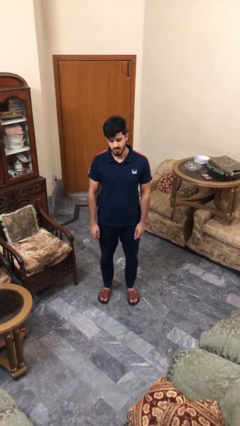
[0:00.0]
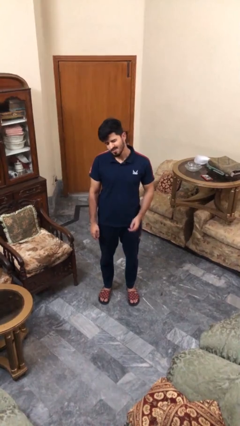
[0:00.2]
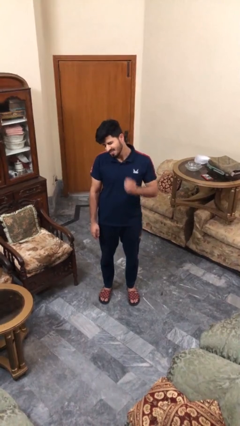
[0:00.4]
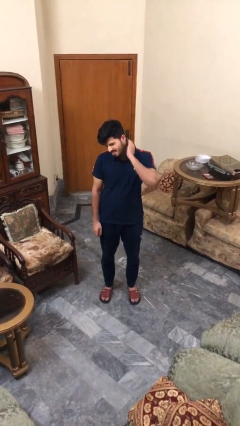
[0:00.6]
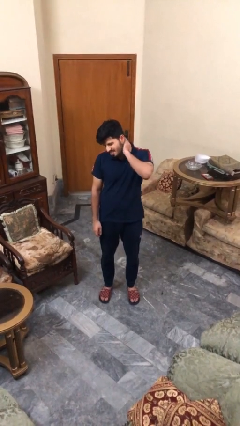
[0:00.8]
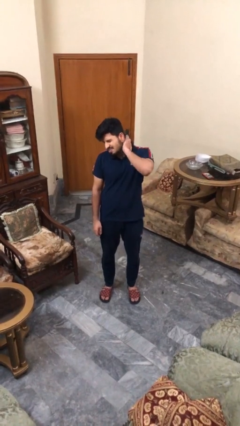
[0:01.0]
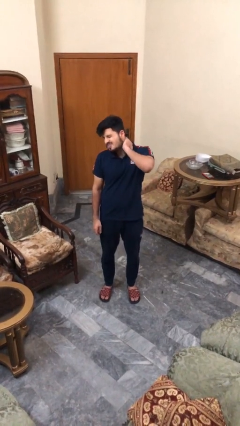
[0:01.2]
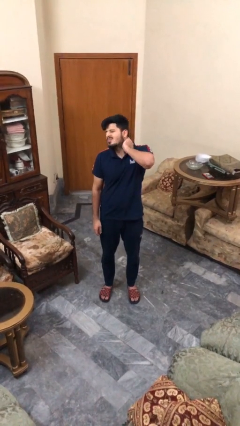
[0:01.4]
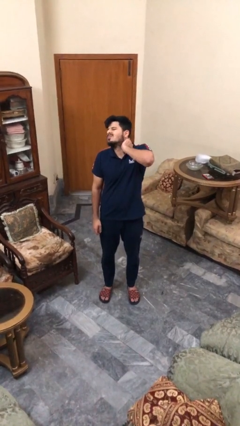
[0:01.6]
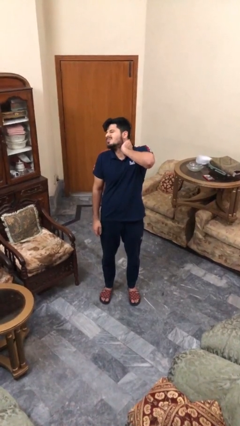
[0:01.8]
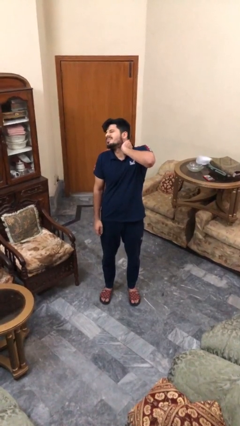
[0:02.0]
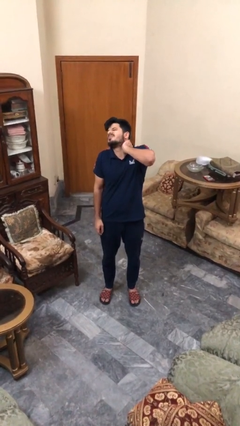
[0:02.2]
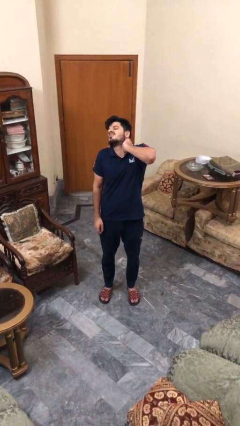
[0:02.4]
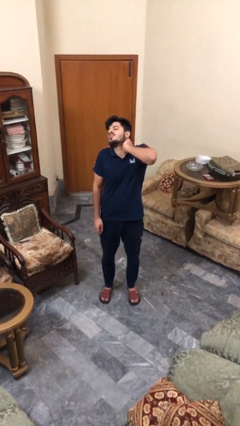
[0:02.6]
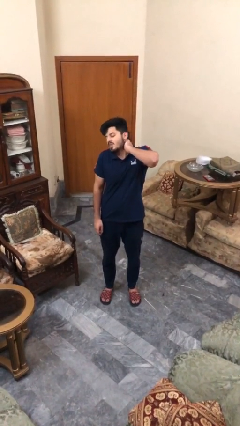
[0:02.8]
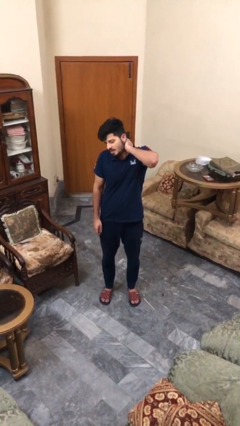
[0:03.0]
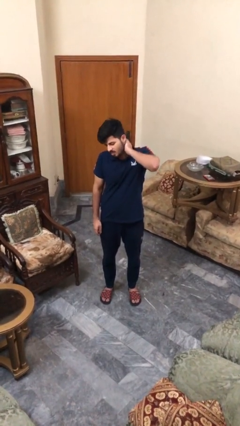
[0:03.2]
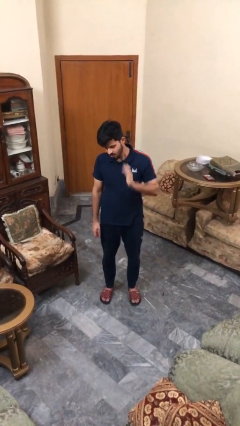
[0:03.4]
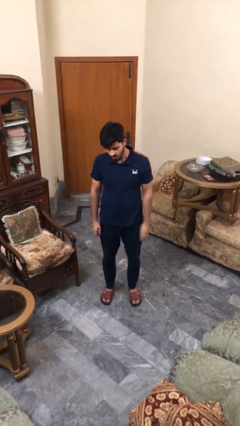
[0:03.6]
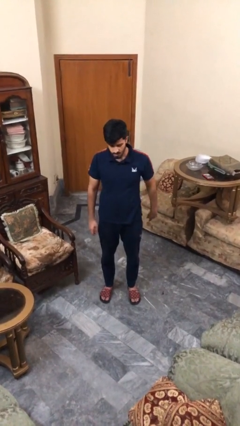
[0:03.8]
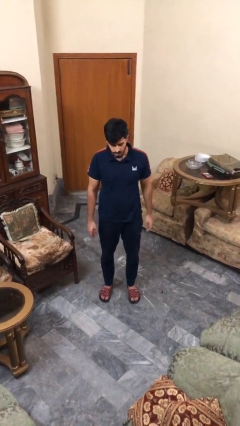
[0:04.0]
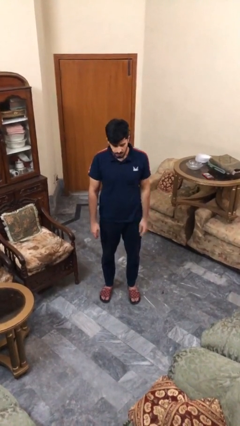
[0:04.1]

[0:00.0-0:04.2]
person rubs neck

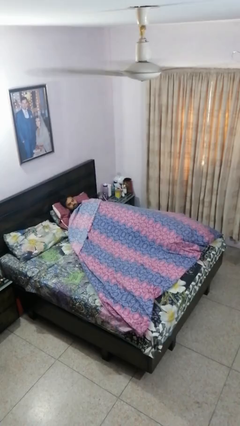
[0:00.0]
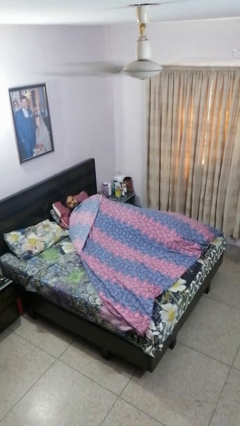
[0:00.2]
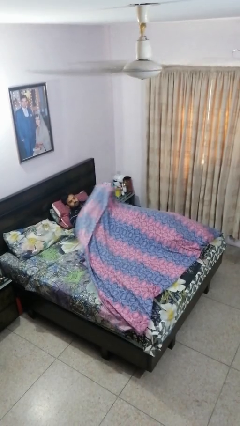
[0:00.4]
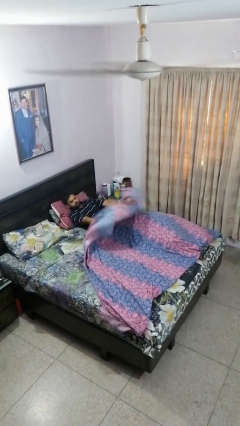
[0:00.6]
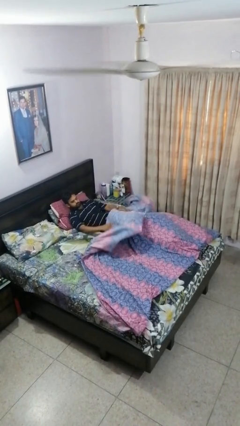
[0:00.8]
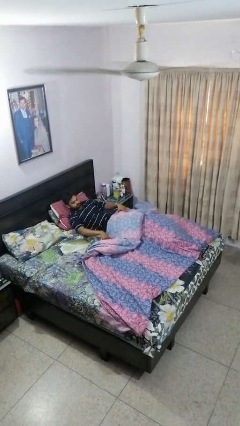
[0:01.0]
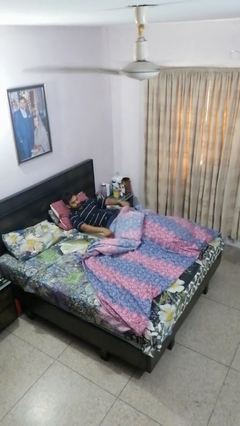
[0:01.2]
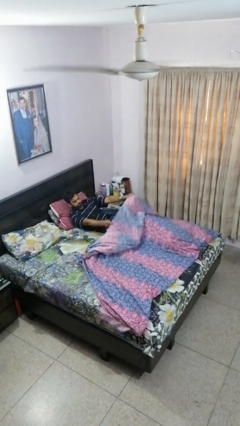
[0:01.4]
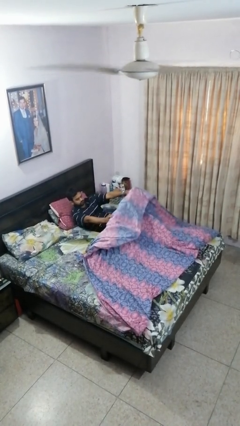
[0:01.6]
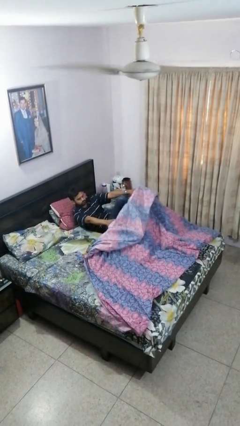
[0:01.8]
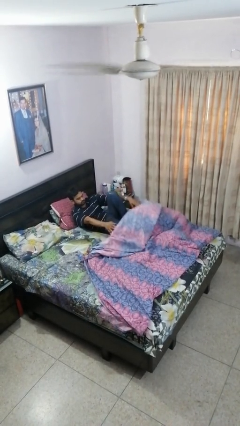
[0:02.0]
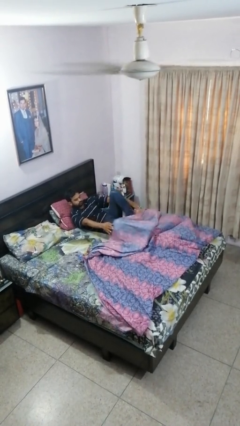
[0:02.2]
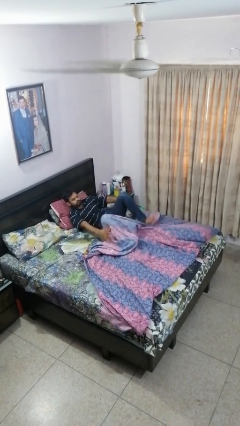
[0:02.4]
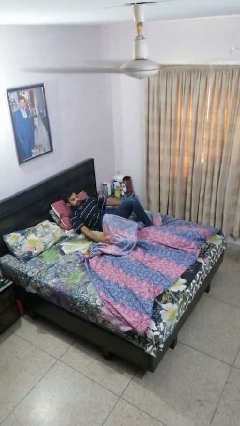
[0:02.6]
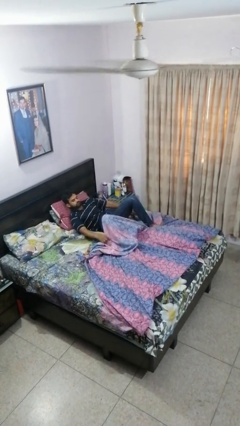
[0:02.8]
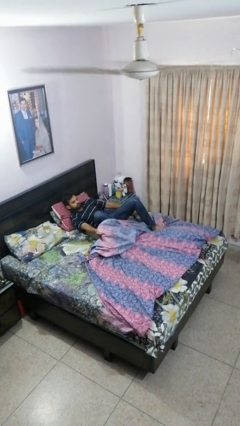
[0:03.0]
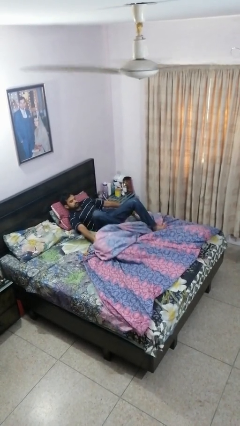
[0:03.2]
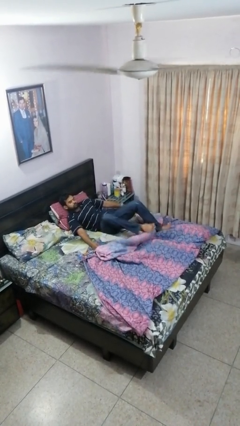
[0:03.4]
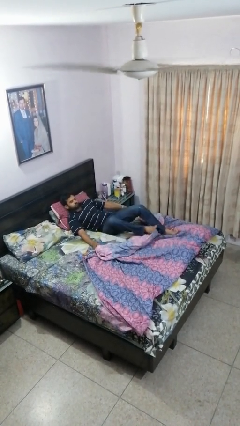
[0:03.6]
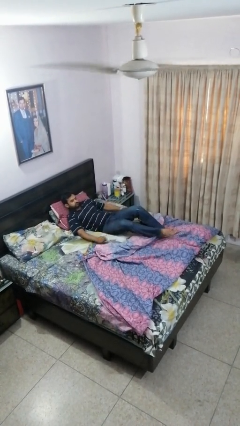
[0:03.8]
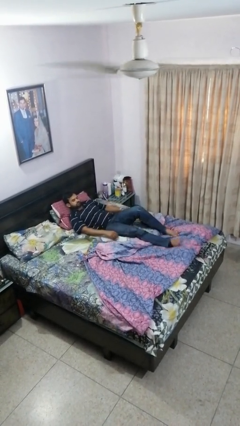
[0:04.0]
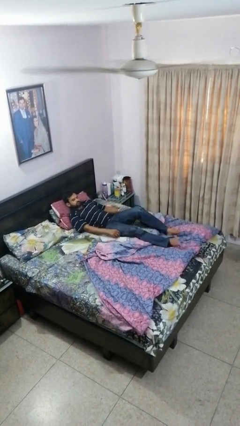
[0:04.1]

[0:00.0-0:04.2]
person uncovers with bedsheets

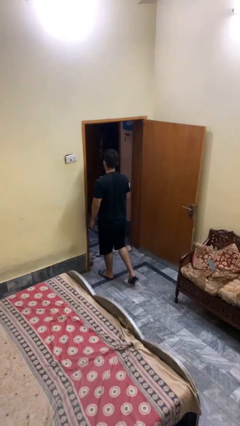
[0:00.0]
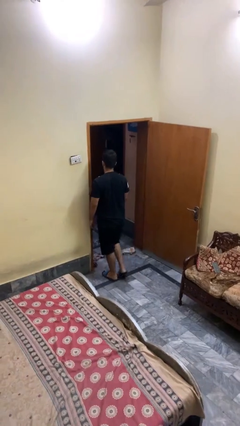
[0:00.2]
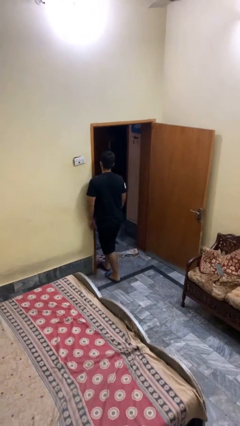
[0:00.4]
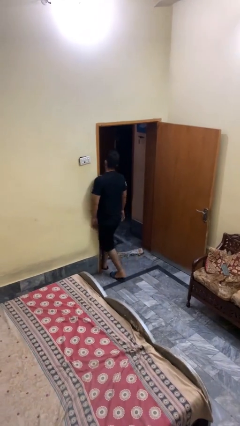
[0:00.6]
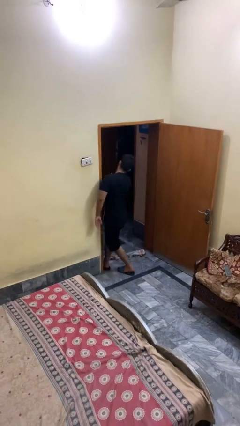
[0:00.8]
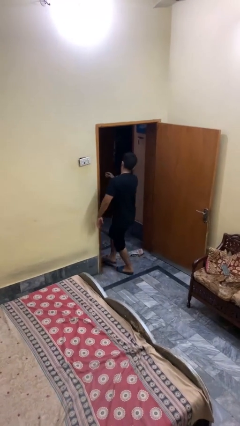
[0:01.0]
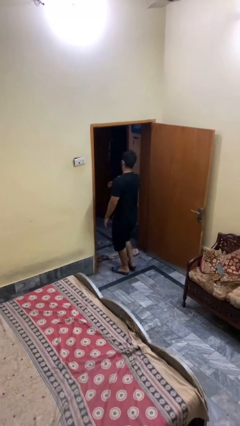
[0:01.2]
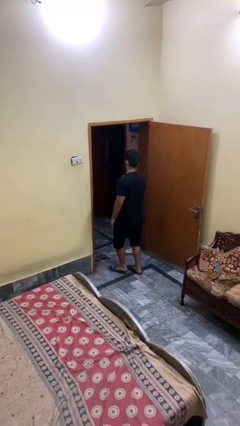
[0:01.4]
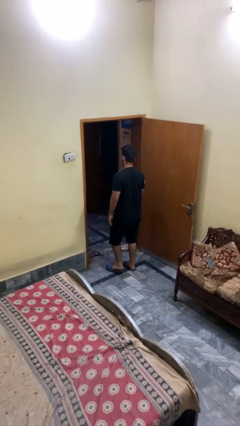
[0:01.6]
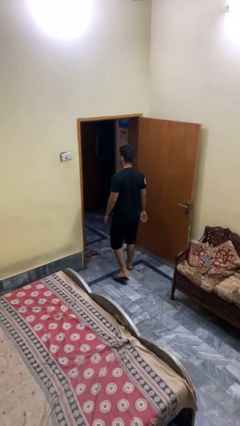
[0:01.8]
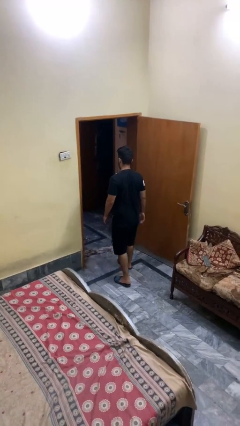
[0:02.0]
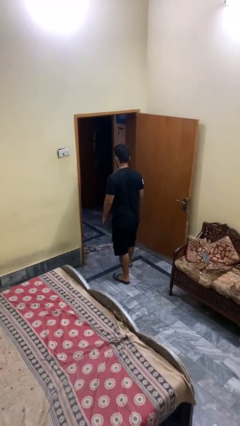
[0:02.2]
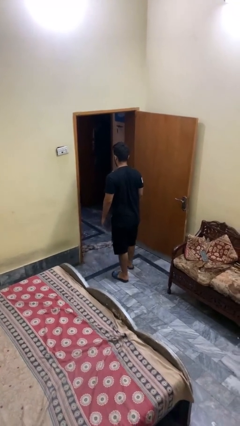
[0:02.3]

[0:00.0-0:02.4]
person bumps into wall

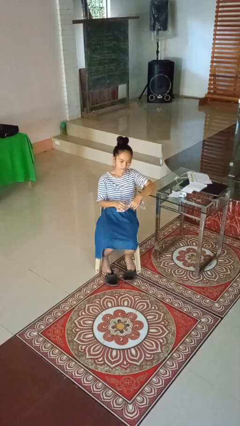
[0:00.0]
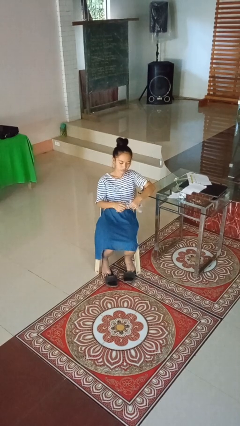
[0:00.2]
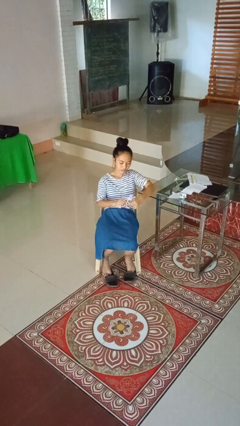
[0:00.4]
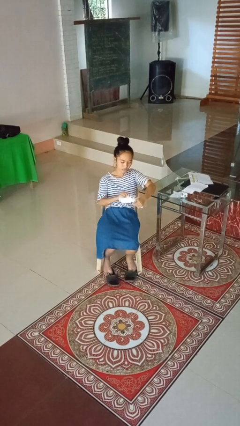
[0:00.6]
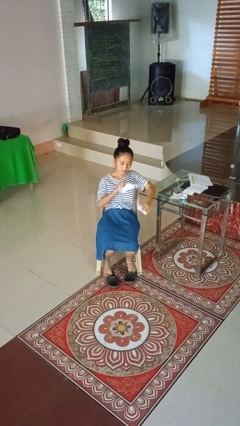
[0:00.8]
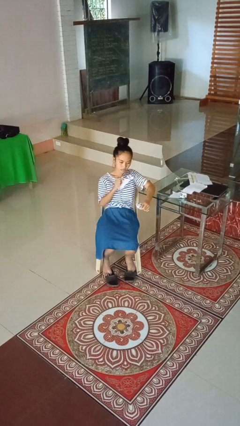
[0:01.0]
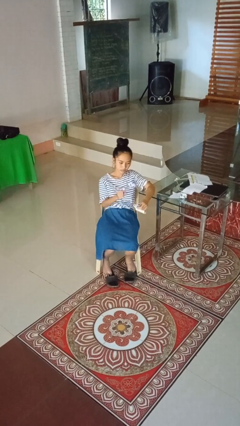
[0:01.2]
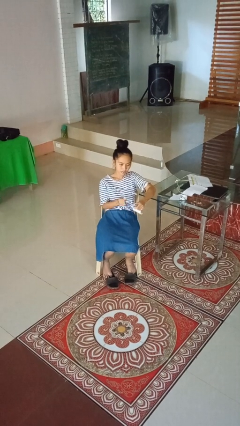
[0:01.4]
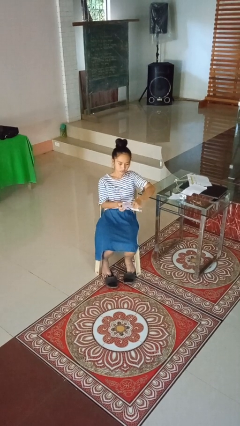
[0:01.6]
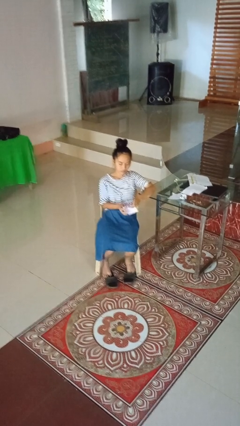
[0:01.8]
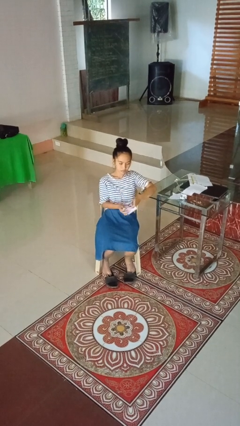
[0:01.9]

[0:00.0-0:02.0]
person tears paper

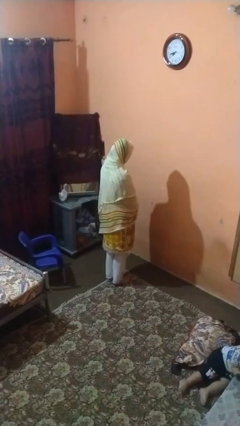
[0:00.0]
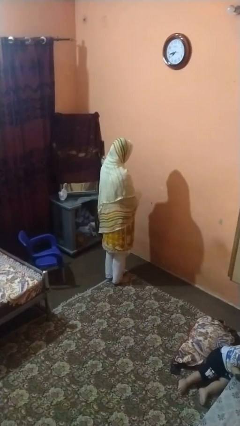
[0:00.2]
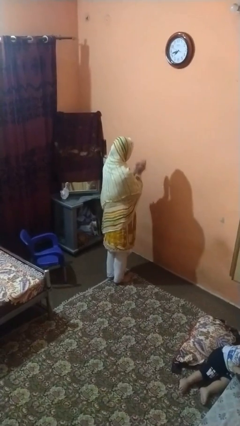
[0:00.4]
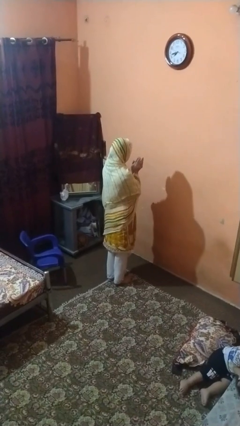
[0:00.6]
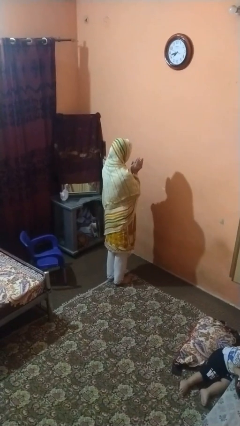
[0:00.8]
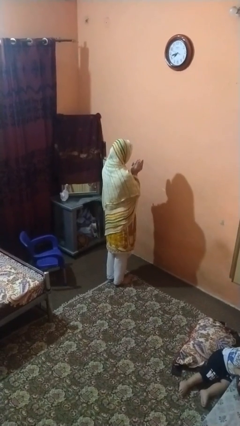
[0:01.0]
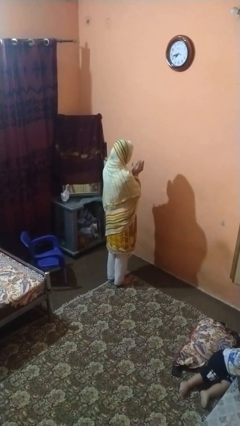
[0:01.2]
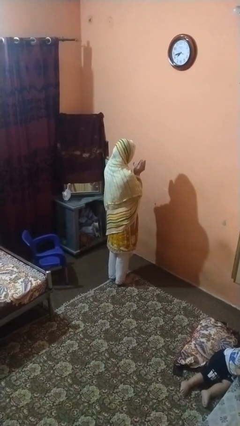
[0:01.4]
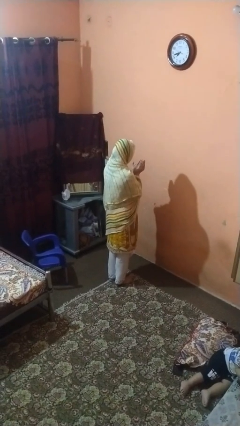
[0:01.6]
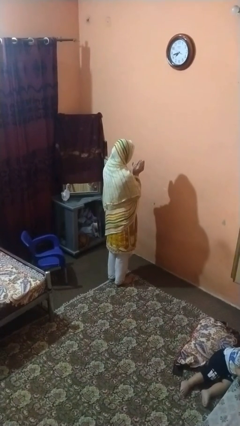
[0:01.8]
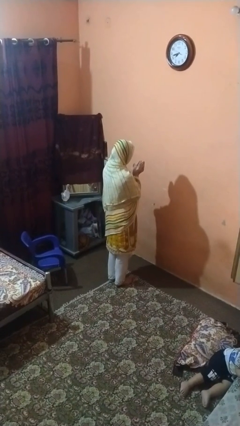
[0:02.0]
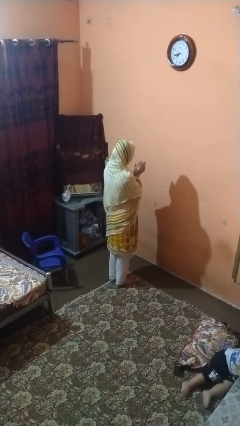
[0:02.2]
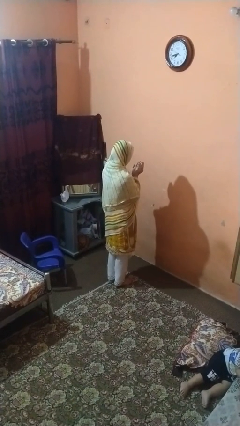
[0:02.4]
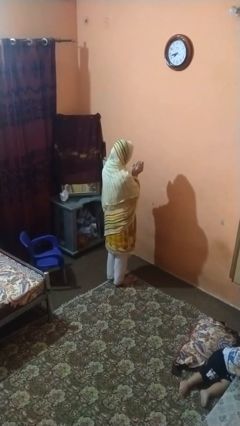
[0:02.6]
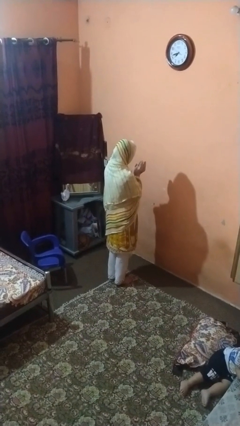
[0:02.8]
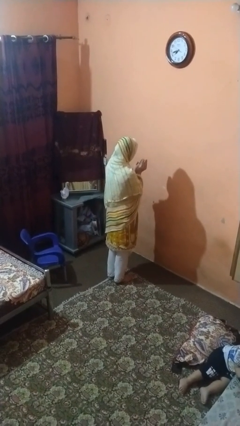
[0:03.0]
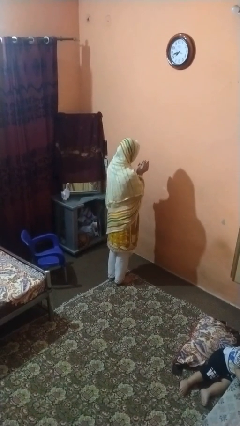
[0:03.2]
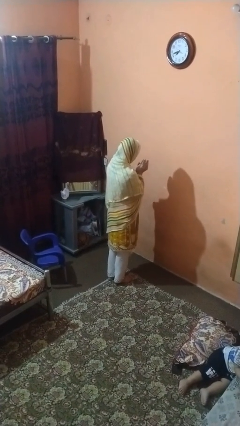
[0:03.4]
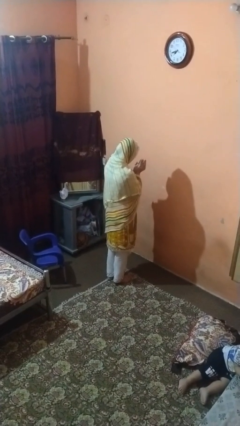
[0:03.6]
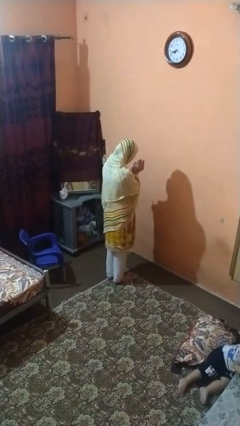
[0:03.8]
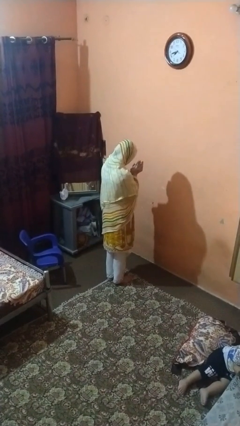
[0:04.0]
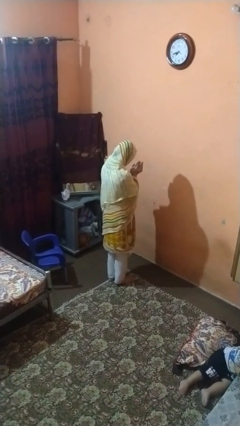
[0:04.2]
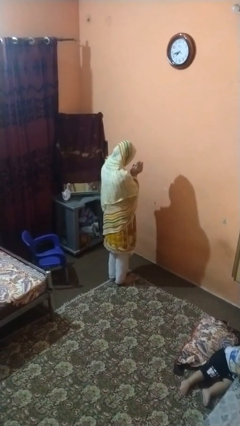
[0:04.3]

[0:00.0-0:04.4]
person prays

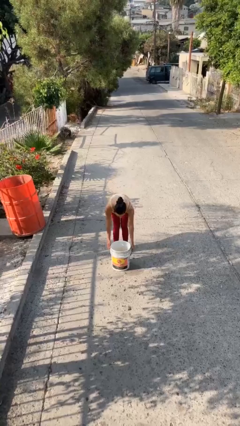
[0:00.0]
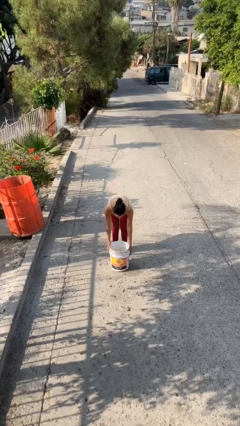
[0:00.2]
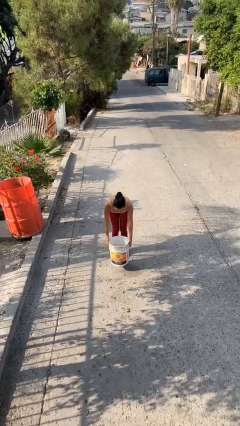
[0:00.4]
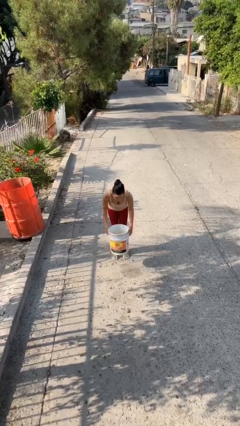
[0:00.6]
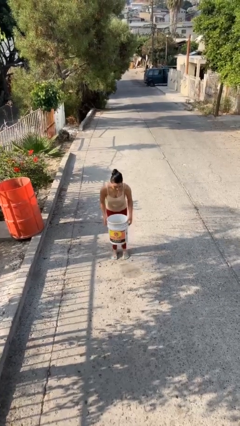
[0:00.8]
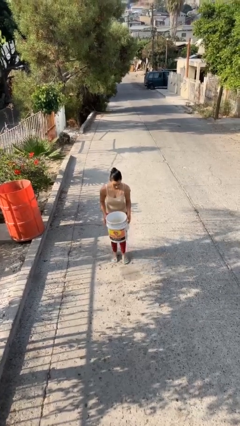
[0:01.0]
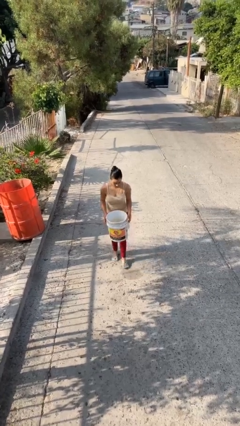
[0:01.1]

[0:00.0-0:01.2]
person picks up object from floor
